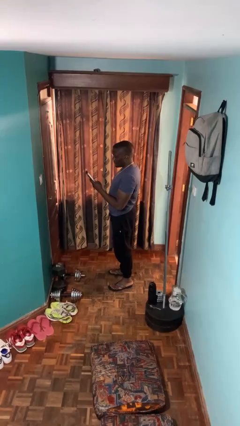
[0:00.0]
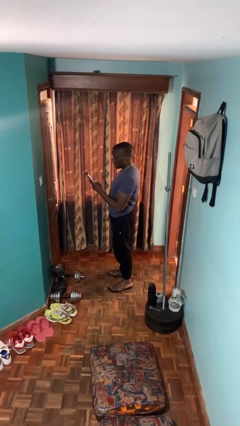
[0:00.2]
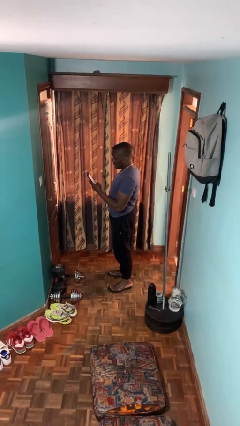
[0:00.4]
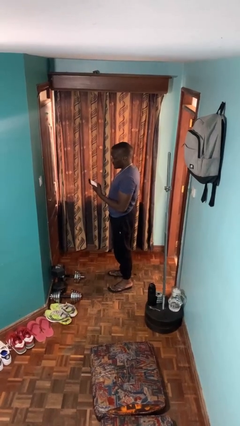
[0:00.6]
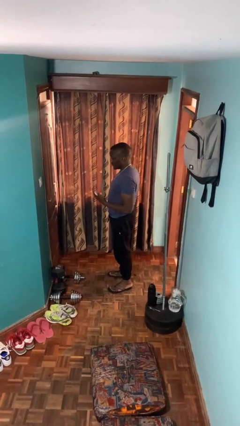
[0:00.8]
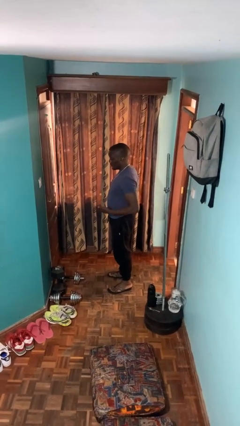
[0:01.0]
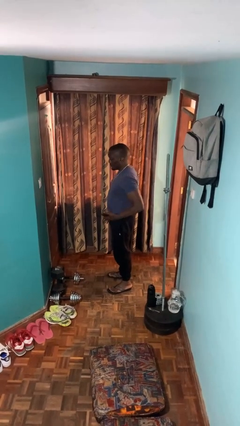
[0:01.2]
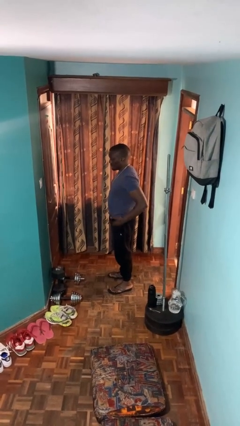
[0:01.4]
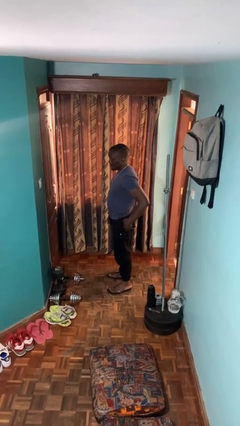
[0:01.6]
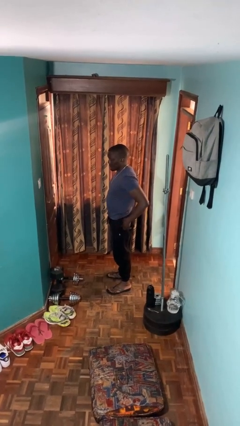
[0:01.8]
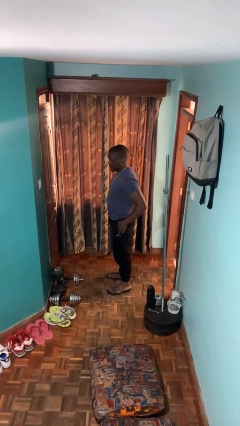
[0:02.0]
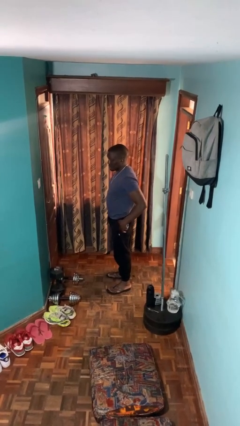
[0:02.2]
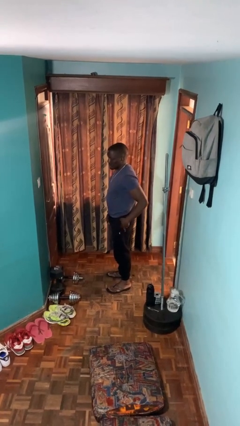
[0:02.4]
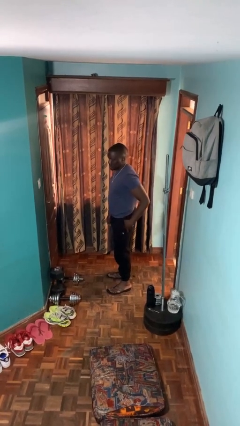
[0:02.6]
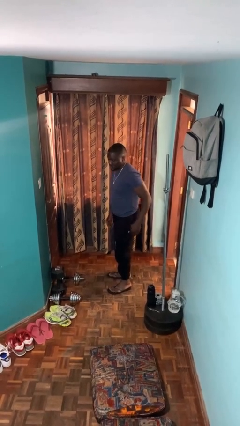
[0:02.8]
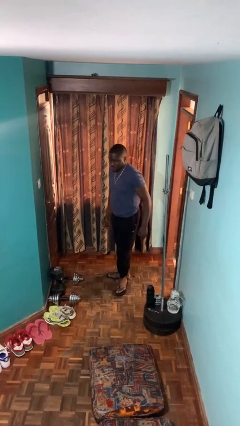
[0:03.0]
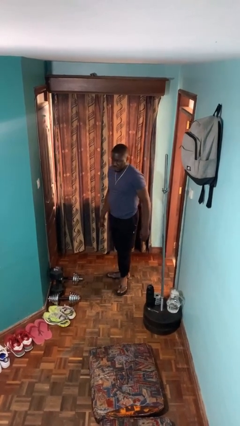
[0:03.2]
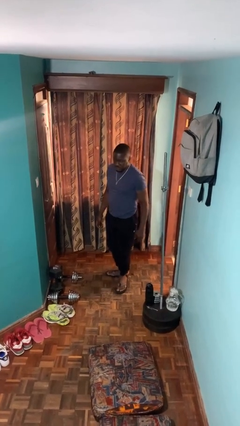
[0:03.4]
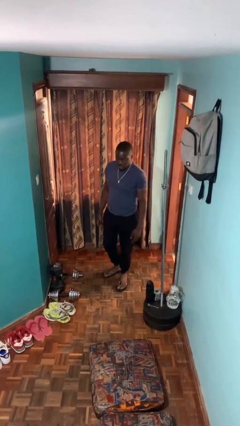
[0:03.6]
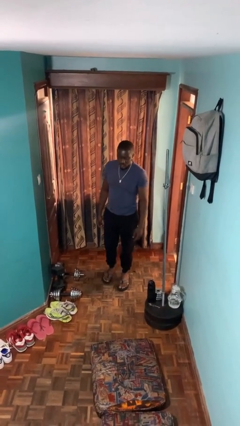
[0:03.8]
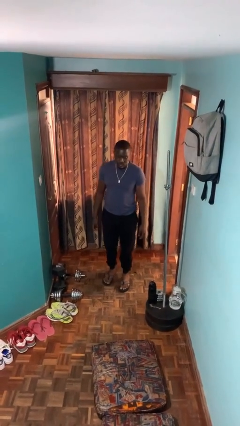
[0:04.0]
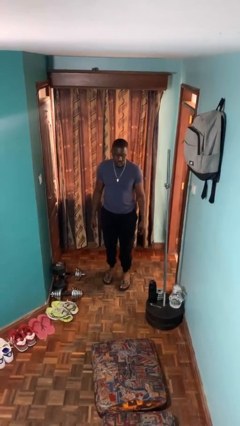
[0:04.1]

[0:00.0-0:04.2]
person puts phone into pocket

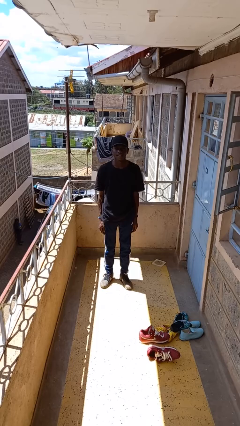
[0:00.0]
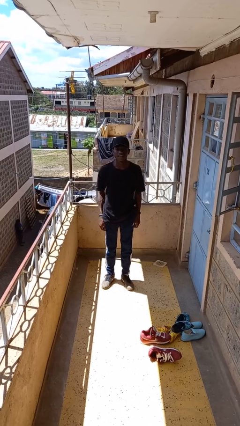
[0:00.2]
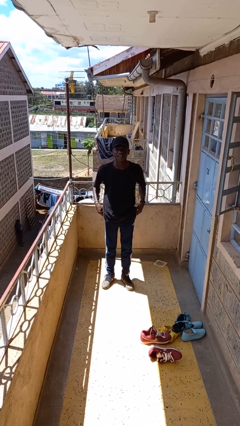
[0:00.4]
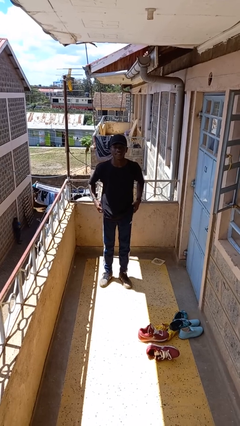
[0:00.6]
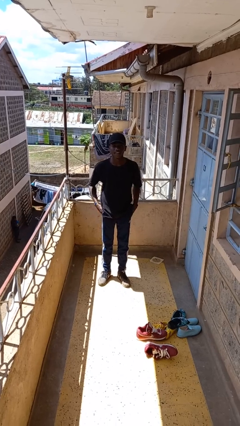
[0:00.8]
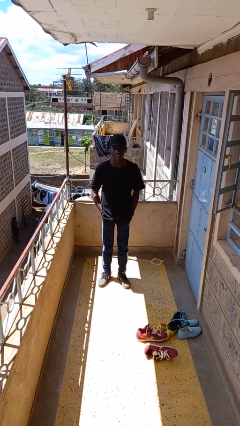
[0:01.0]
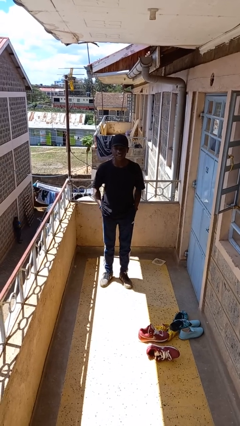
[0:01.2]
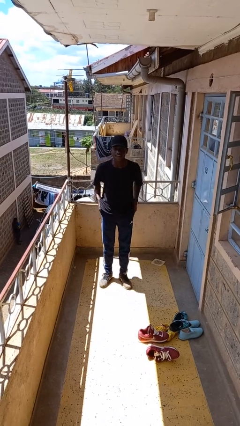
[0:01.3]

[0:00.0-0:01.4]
person puts hands in back pockets

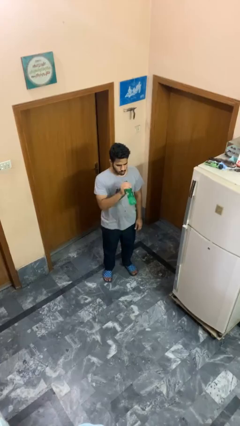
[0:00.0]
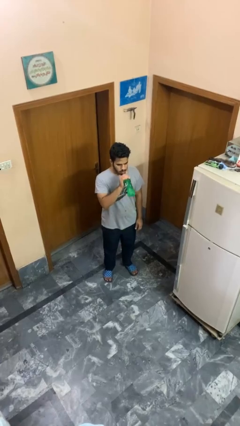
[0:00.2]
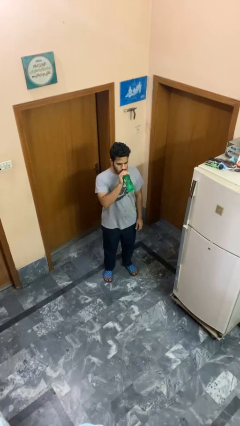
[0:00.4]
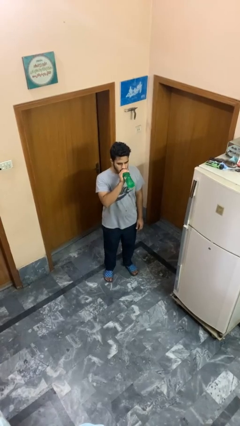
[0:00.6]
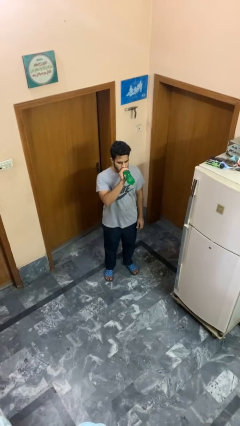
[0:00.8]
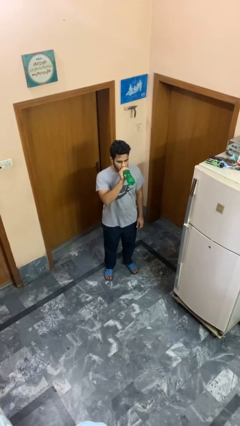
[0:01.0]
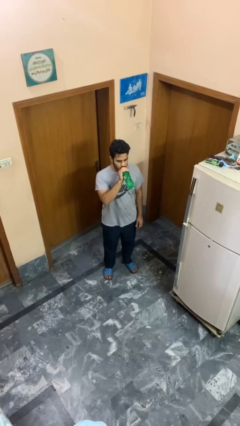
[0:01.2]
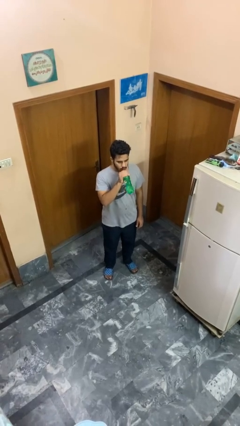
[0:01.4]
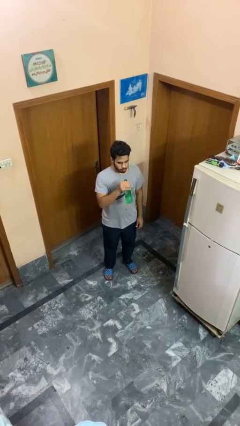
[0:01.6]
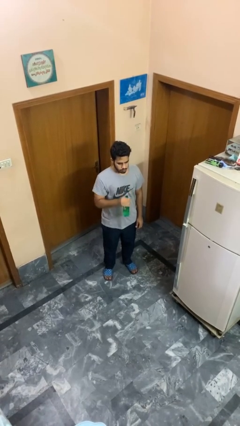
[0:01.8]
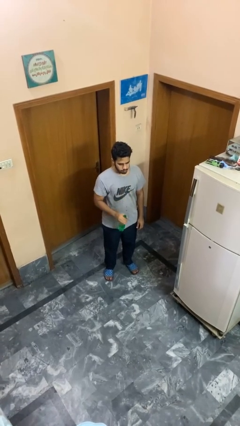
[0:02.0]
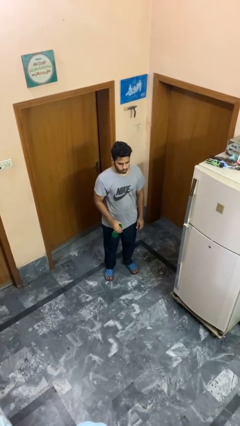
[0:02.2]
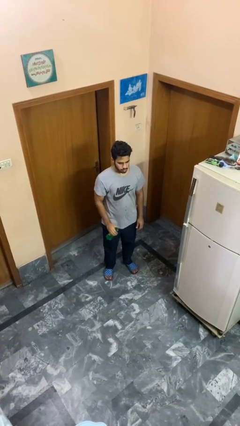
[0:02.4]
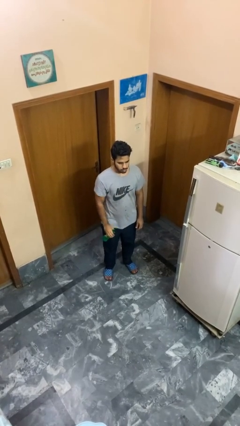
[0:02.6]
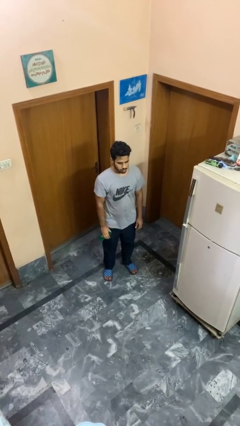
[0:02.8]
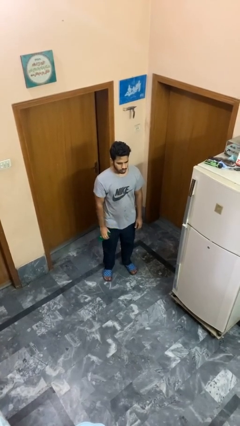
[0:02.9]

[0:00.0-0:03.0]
person drinks from bottle

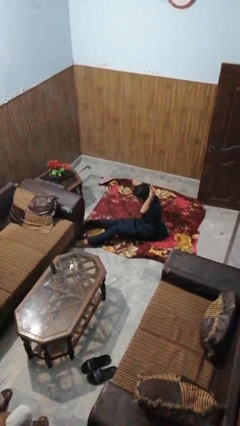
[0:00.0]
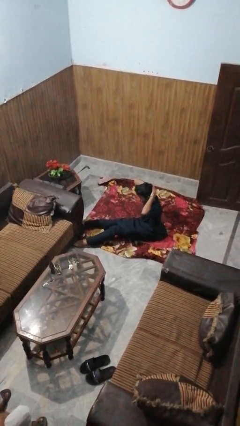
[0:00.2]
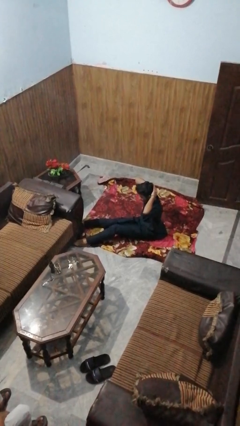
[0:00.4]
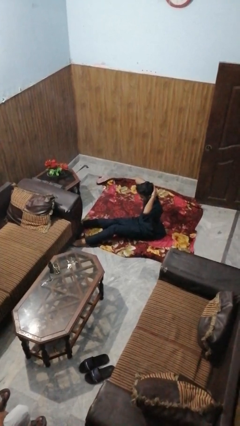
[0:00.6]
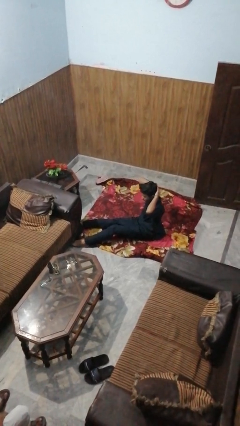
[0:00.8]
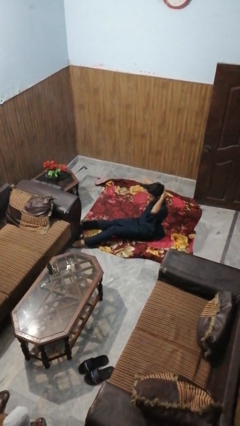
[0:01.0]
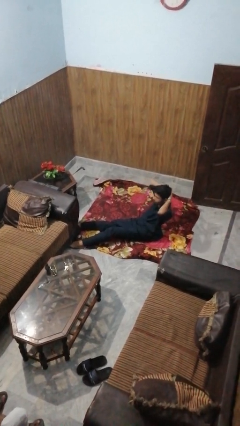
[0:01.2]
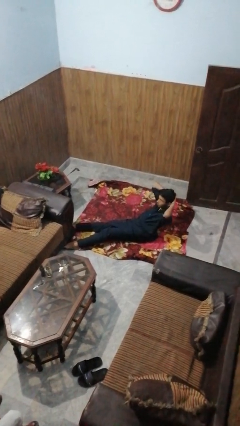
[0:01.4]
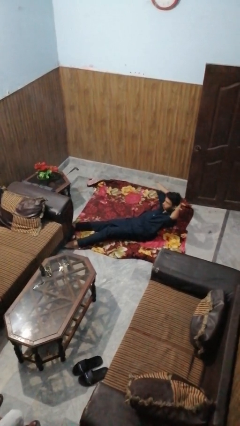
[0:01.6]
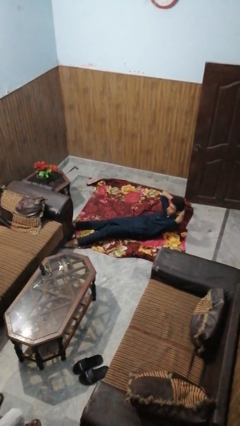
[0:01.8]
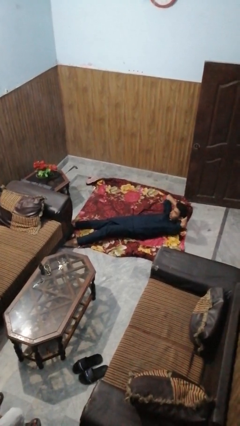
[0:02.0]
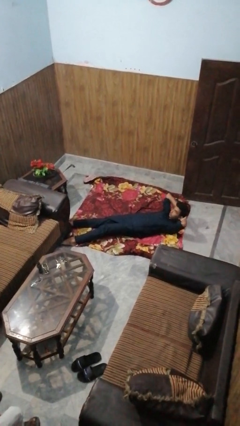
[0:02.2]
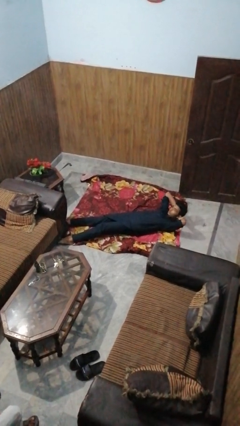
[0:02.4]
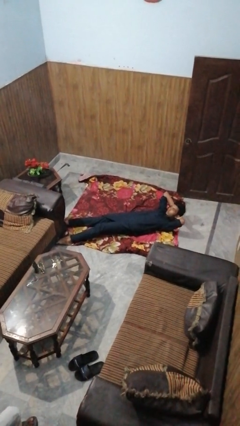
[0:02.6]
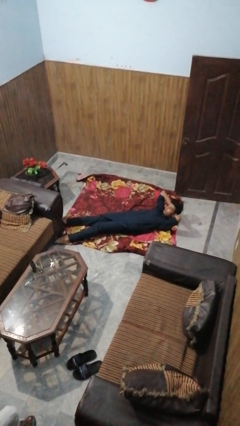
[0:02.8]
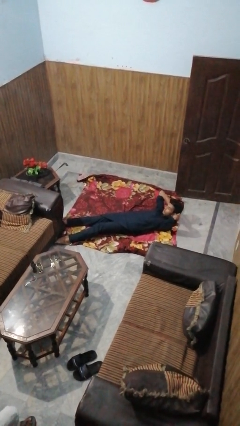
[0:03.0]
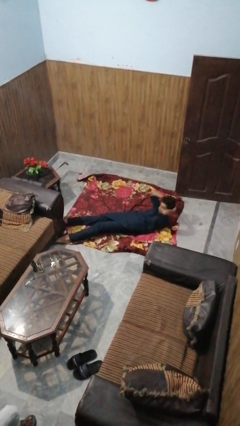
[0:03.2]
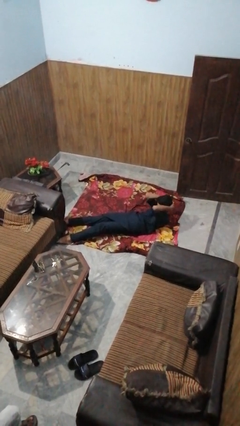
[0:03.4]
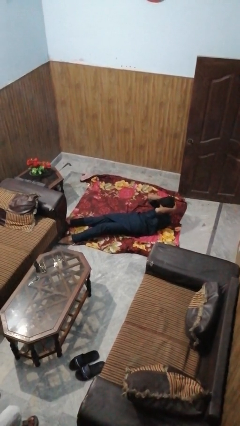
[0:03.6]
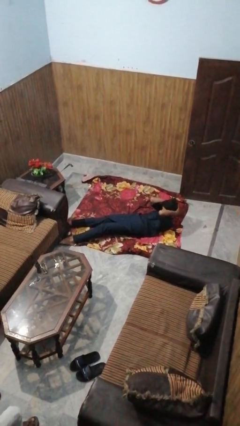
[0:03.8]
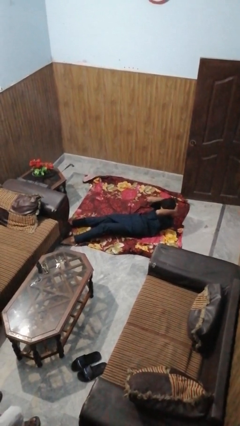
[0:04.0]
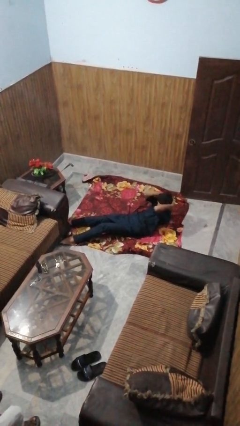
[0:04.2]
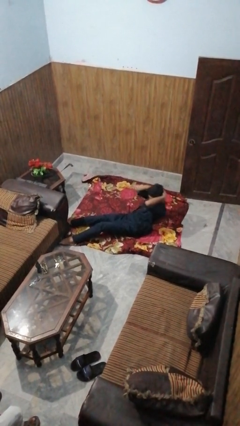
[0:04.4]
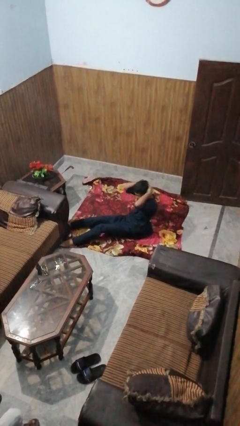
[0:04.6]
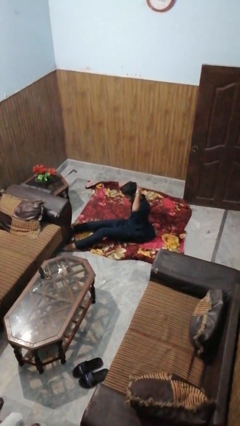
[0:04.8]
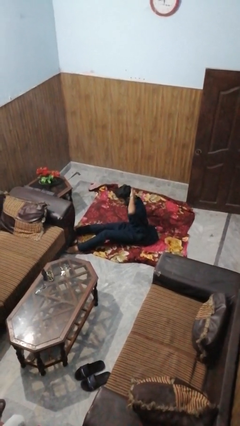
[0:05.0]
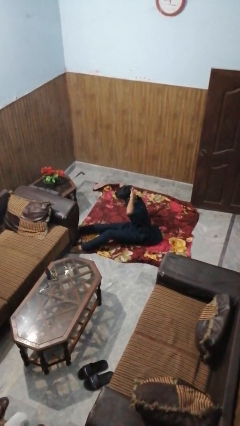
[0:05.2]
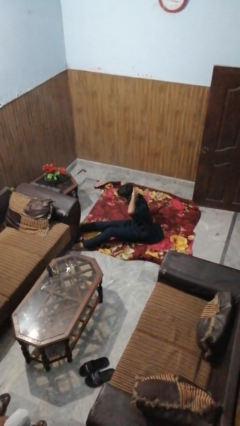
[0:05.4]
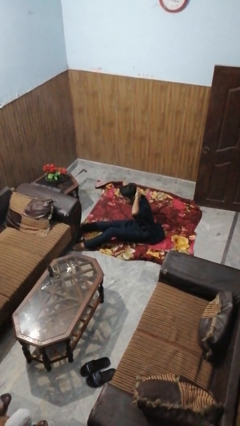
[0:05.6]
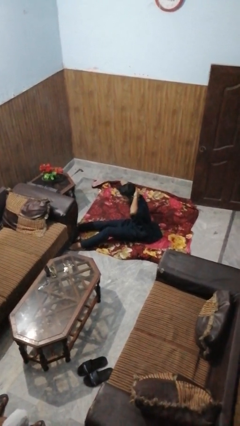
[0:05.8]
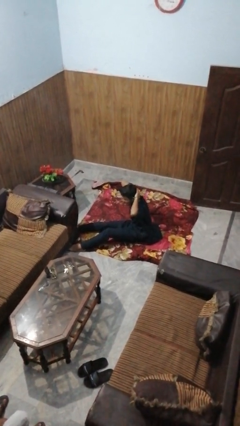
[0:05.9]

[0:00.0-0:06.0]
person exercises with situp

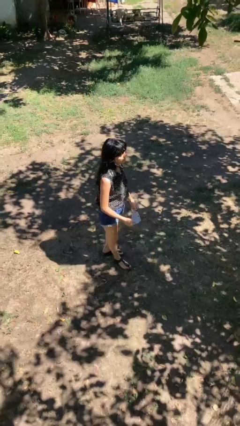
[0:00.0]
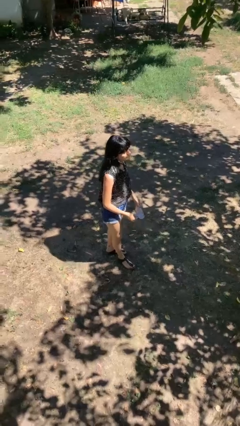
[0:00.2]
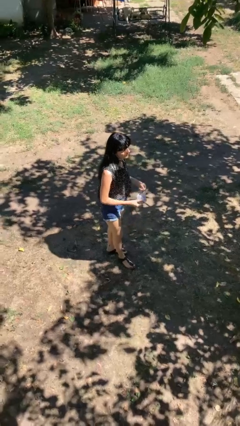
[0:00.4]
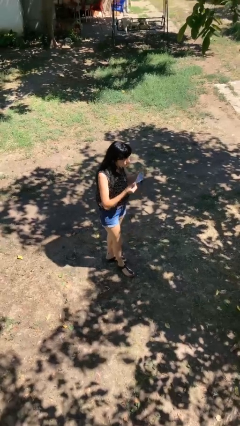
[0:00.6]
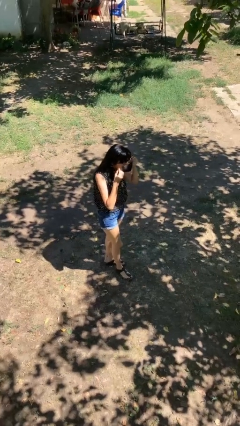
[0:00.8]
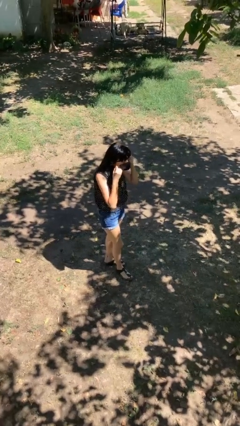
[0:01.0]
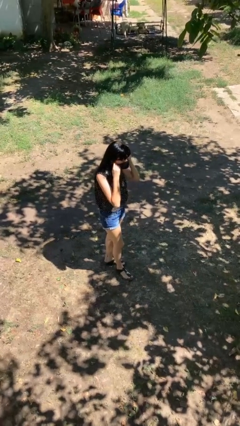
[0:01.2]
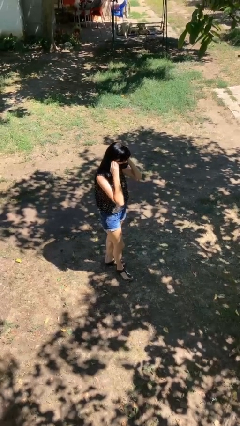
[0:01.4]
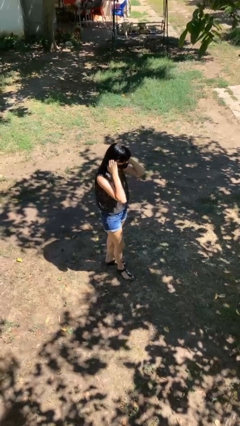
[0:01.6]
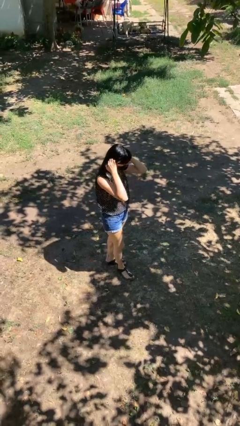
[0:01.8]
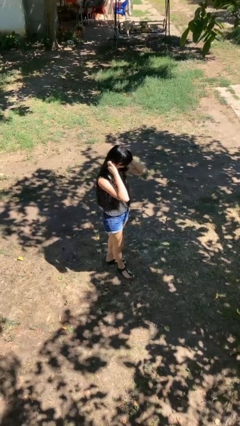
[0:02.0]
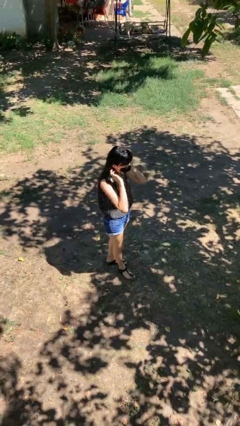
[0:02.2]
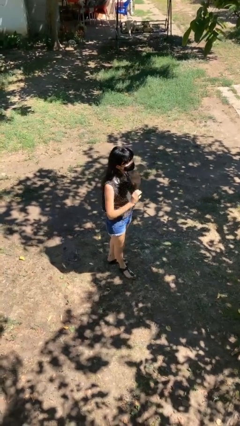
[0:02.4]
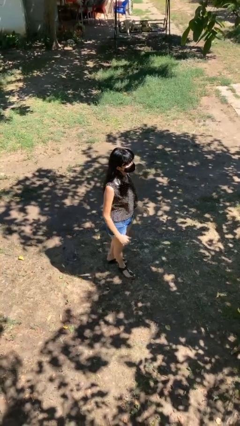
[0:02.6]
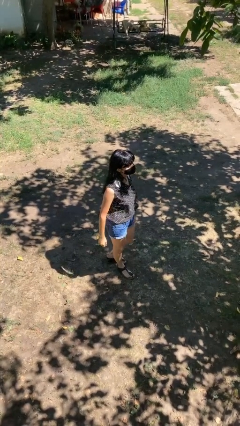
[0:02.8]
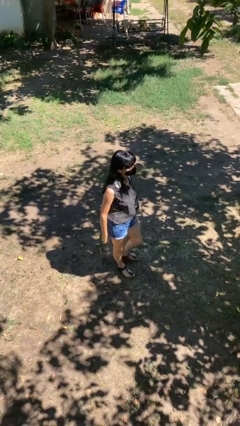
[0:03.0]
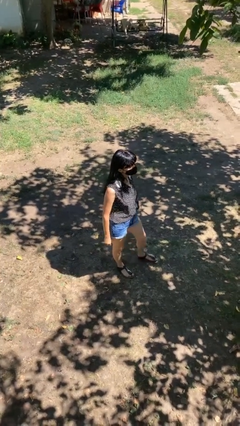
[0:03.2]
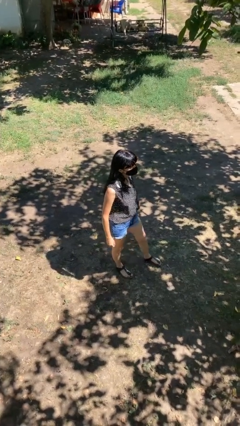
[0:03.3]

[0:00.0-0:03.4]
person puts on facemask
